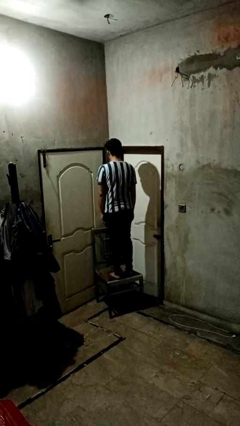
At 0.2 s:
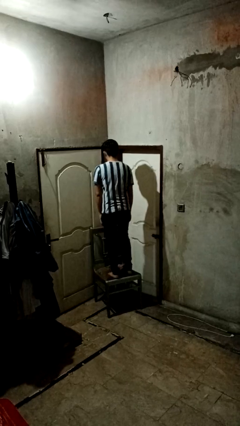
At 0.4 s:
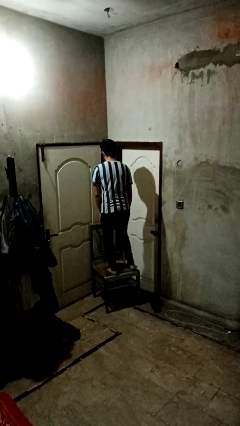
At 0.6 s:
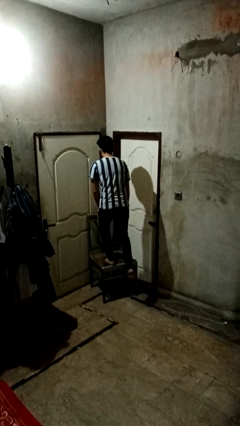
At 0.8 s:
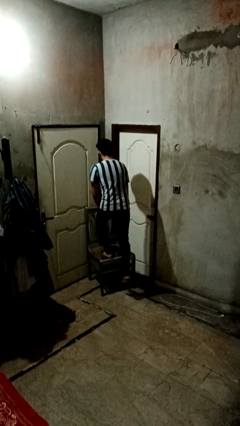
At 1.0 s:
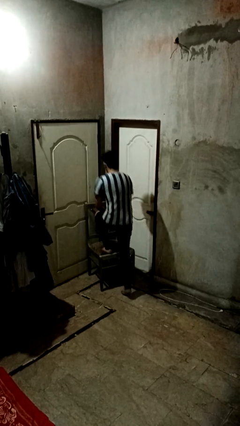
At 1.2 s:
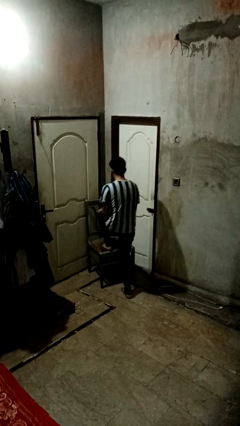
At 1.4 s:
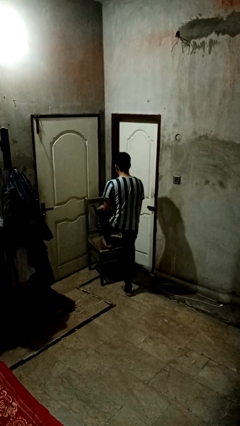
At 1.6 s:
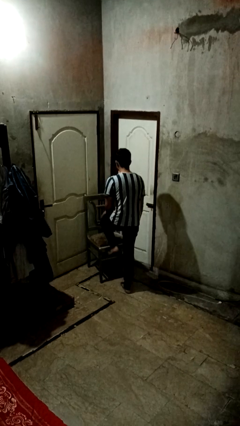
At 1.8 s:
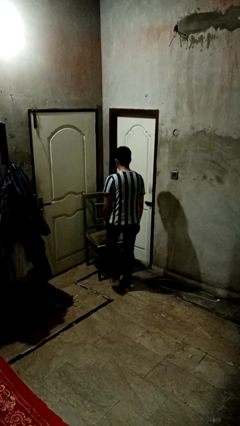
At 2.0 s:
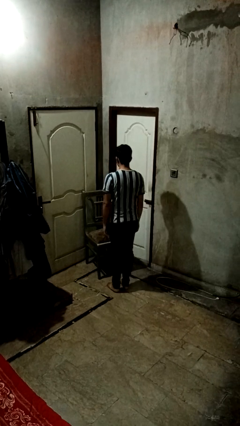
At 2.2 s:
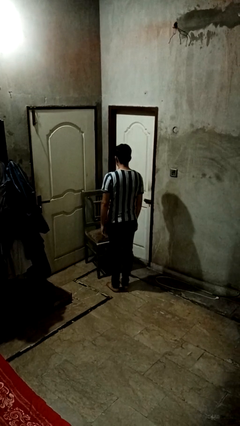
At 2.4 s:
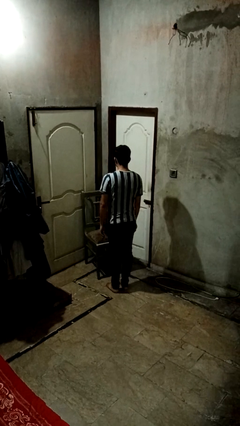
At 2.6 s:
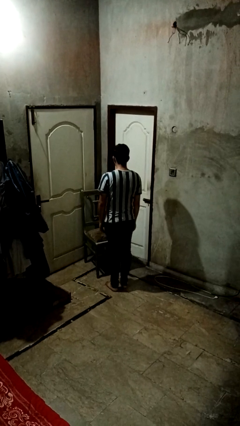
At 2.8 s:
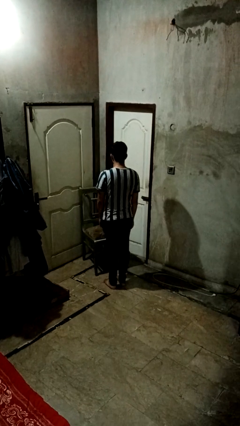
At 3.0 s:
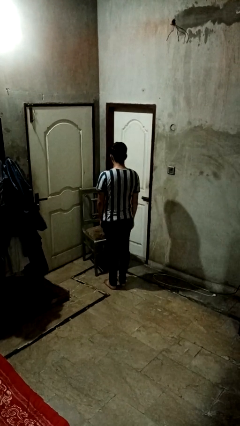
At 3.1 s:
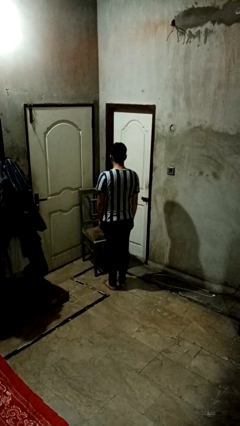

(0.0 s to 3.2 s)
person climbs off chair

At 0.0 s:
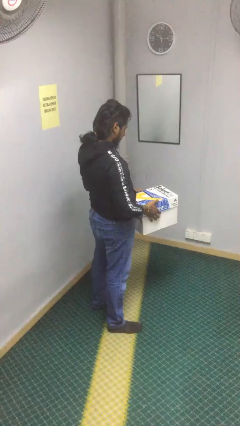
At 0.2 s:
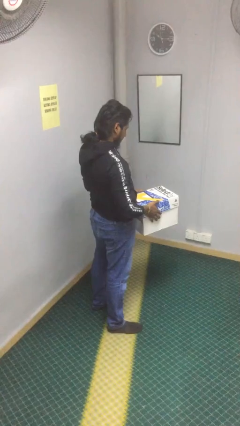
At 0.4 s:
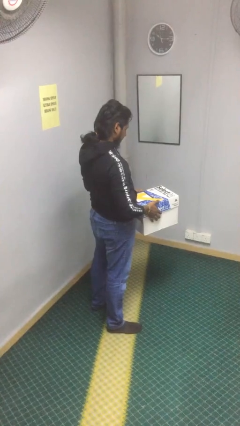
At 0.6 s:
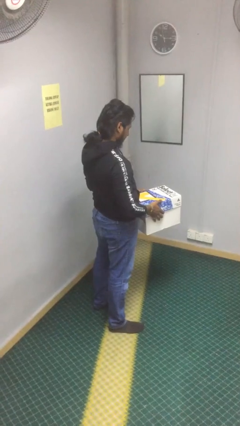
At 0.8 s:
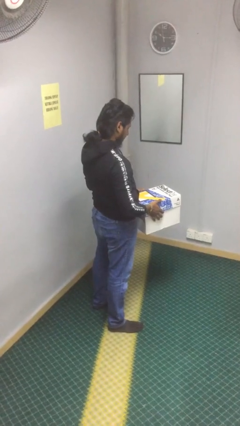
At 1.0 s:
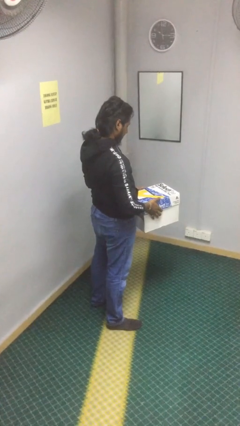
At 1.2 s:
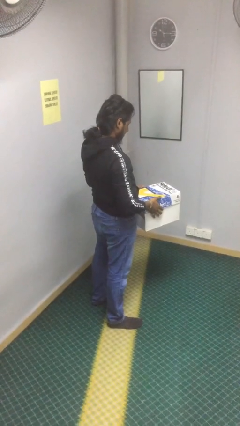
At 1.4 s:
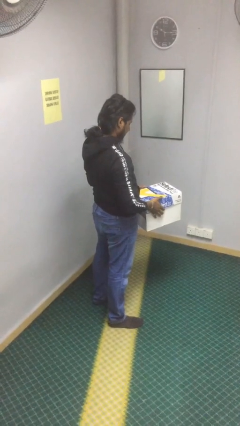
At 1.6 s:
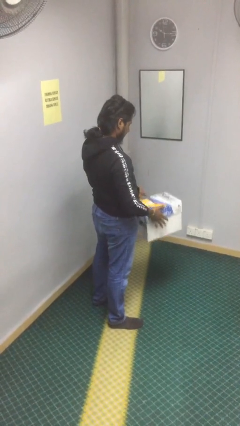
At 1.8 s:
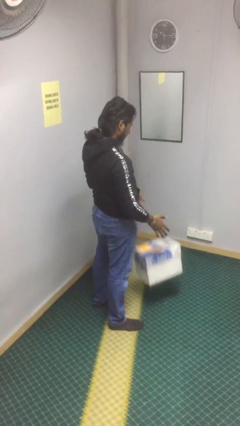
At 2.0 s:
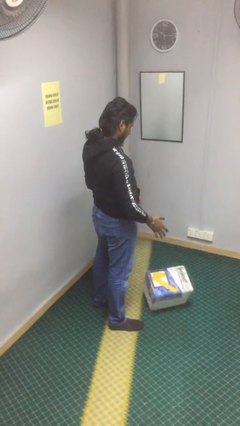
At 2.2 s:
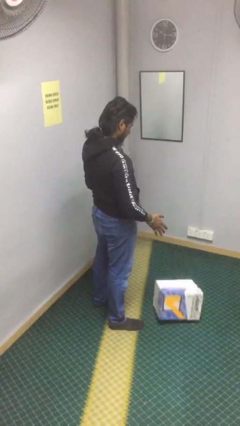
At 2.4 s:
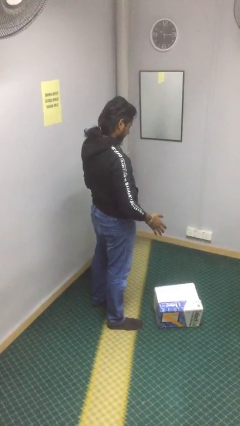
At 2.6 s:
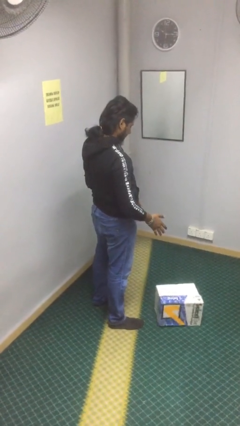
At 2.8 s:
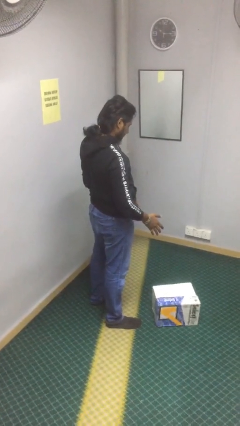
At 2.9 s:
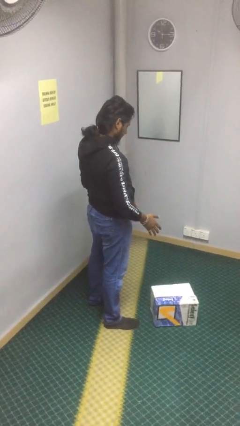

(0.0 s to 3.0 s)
person drops object

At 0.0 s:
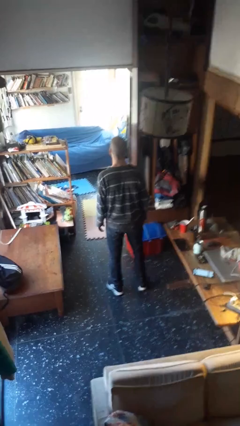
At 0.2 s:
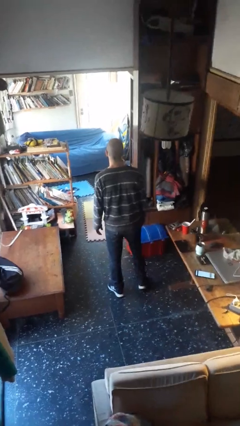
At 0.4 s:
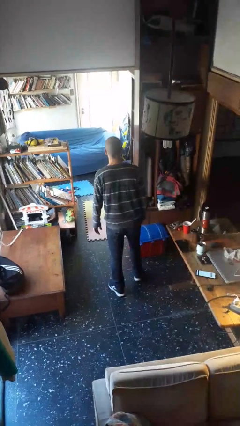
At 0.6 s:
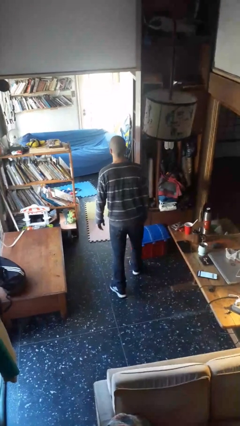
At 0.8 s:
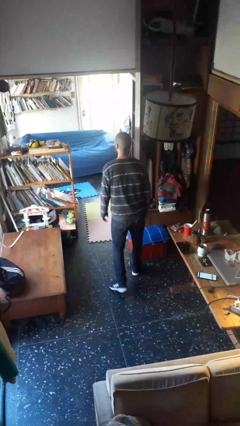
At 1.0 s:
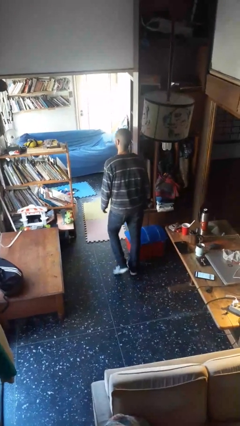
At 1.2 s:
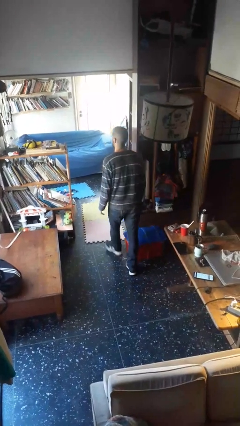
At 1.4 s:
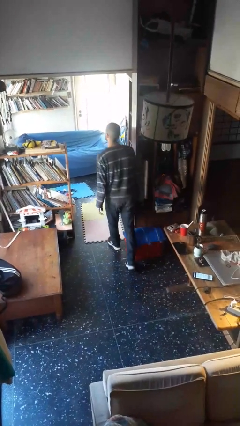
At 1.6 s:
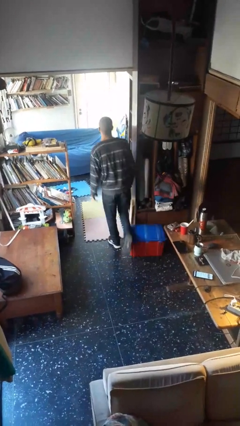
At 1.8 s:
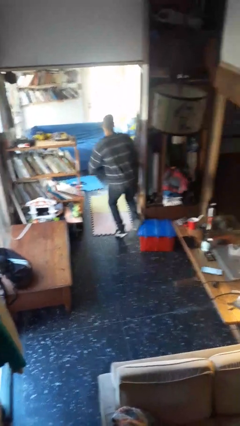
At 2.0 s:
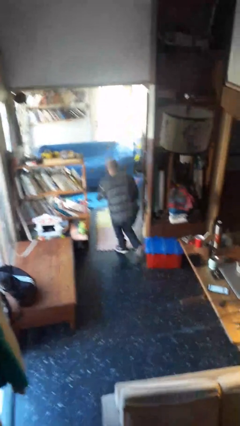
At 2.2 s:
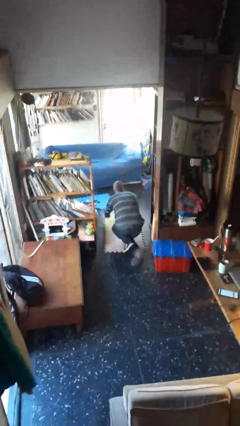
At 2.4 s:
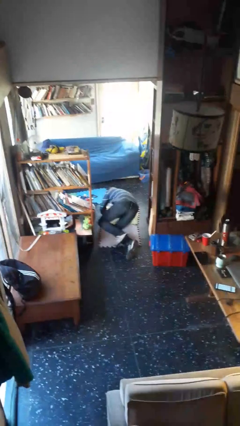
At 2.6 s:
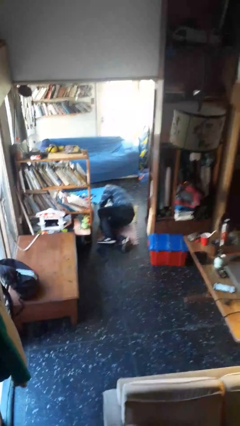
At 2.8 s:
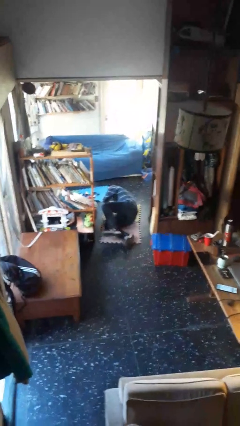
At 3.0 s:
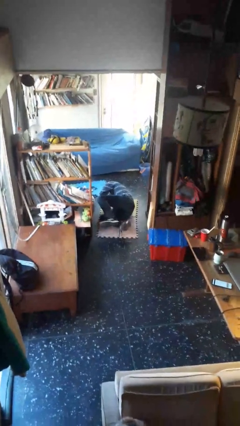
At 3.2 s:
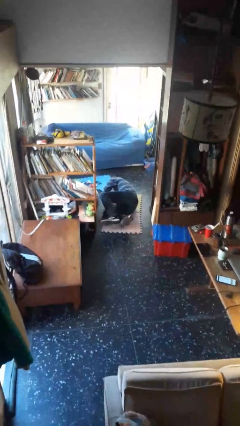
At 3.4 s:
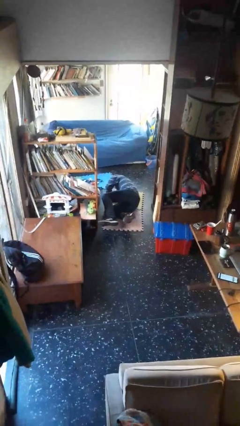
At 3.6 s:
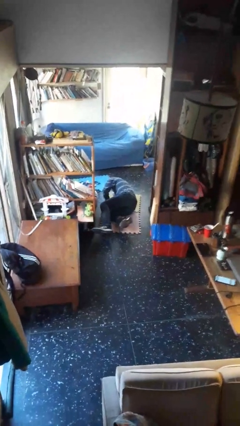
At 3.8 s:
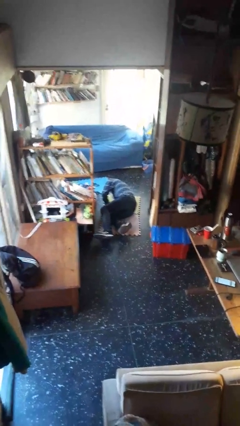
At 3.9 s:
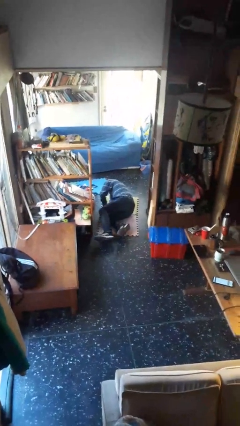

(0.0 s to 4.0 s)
person trips on object on floor

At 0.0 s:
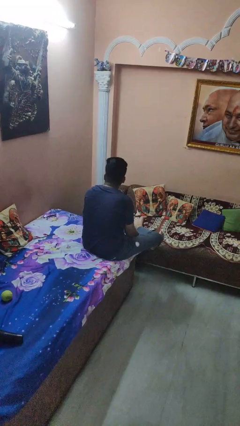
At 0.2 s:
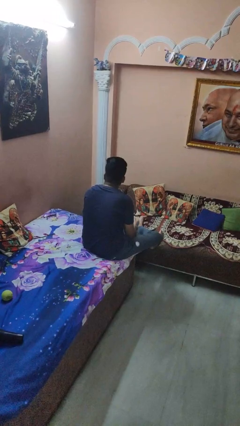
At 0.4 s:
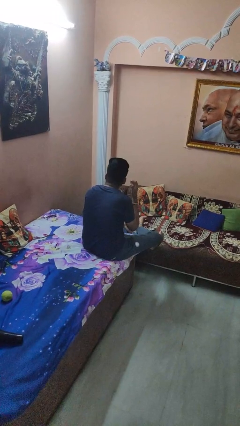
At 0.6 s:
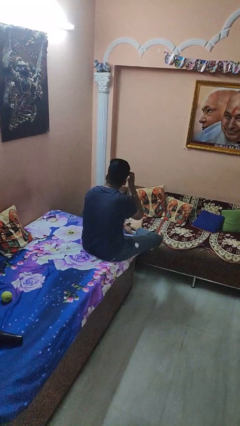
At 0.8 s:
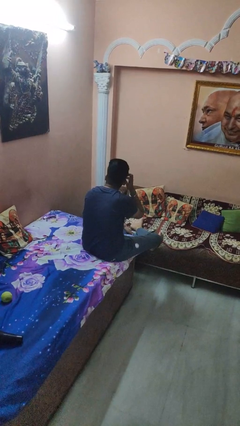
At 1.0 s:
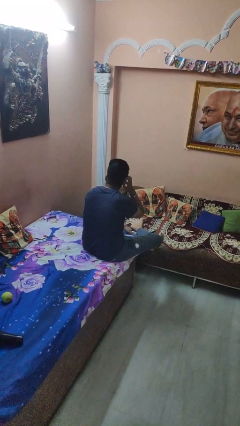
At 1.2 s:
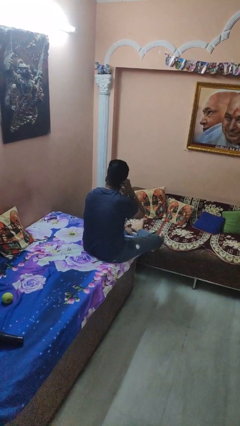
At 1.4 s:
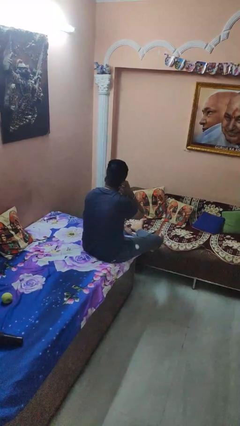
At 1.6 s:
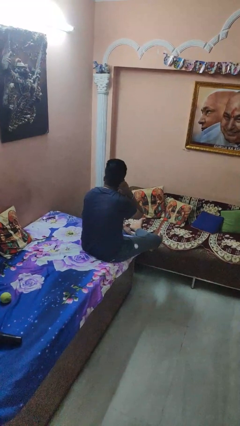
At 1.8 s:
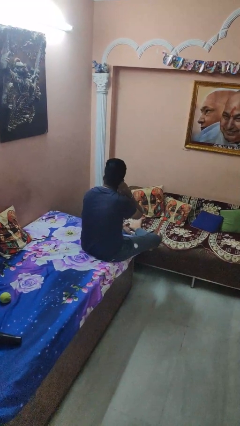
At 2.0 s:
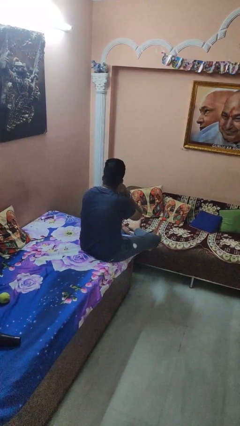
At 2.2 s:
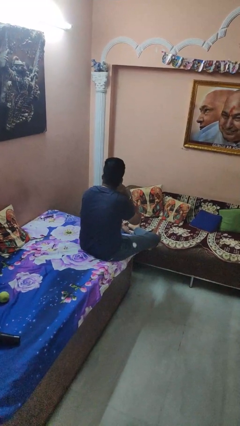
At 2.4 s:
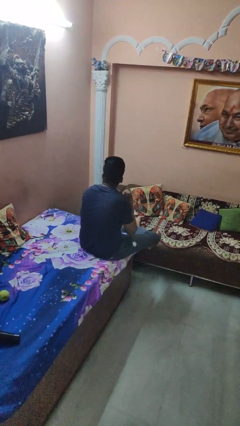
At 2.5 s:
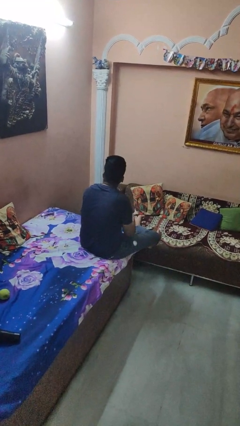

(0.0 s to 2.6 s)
person strokes hair

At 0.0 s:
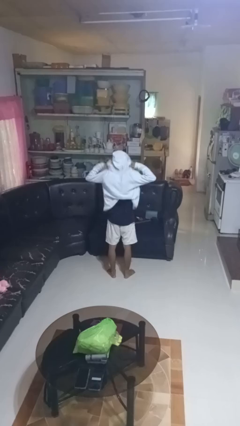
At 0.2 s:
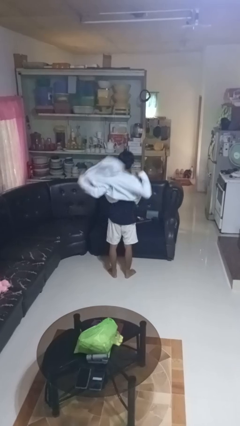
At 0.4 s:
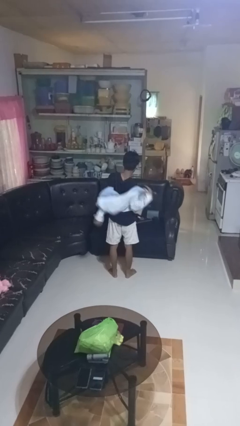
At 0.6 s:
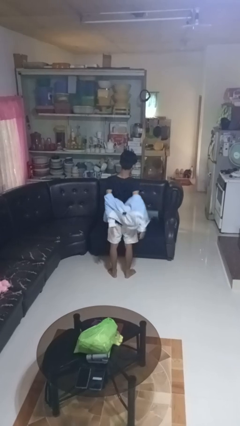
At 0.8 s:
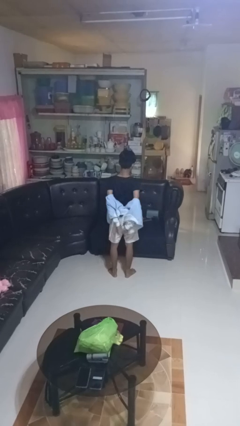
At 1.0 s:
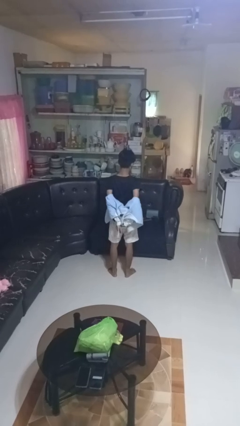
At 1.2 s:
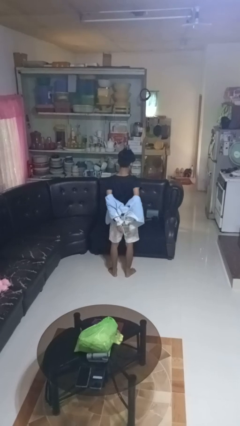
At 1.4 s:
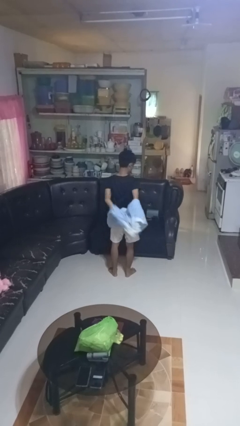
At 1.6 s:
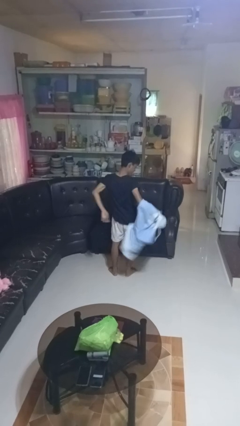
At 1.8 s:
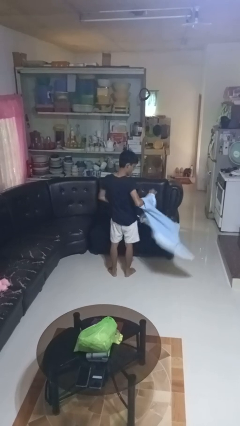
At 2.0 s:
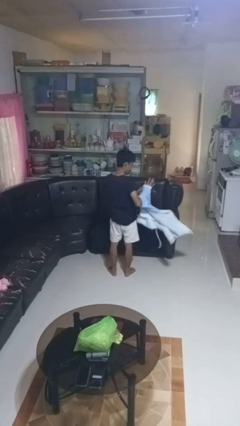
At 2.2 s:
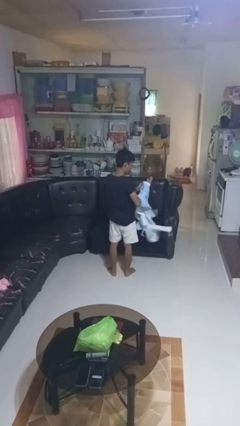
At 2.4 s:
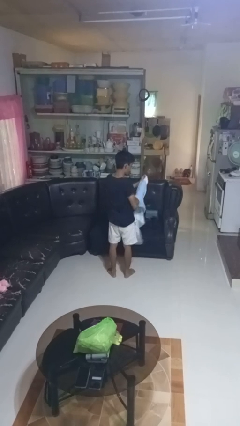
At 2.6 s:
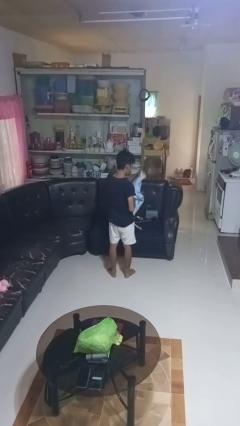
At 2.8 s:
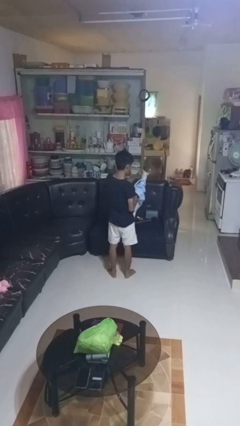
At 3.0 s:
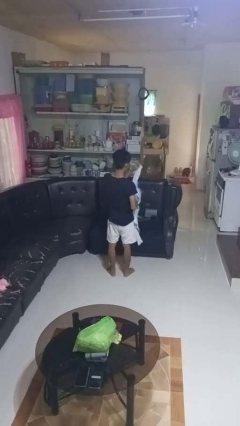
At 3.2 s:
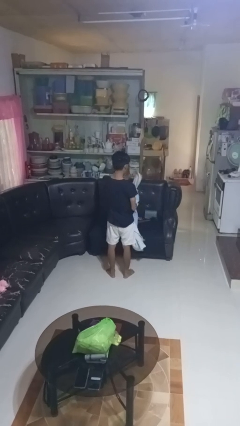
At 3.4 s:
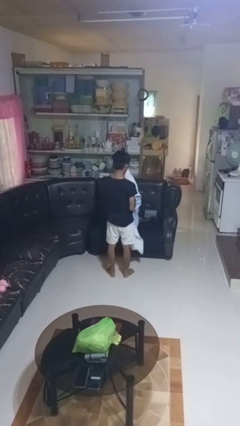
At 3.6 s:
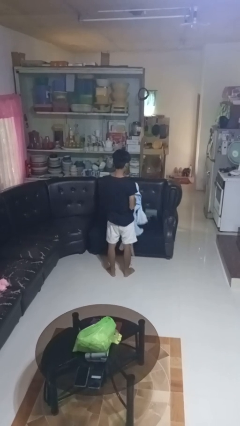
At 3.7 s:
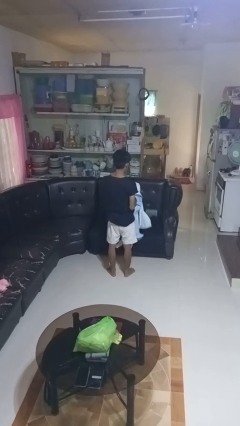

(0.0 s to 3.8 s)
person takes off hoodie

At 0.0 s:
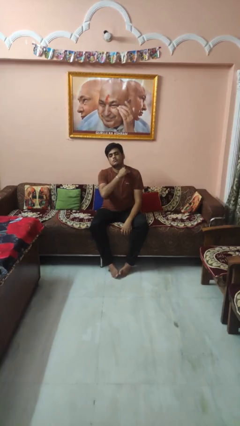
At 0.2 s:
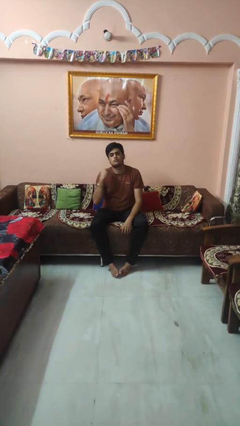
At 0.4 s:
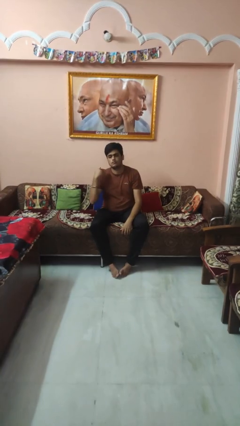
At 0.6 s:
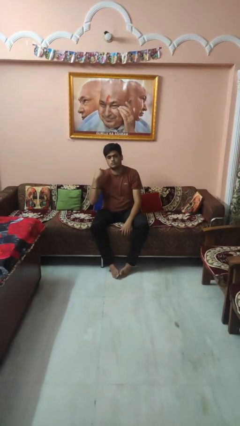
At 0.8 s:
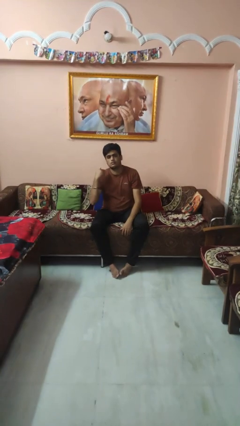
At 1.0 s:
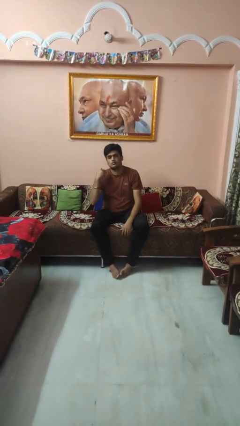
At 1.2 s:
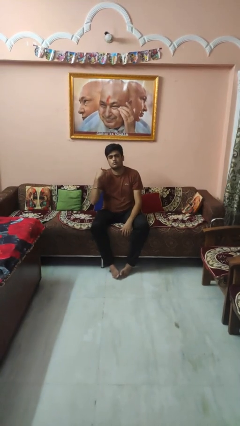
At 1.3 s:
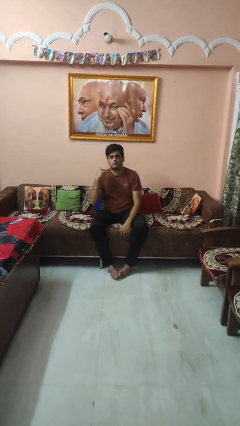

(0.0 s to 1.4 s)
person gestures cut
